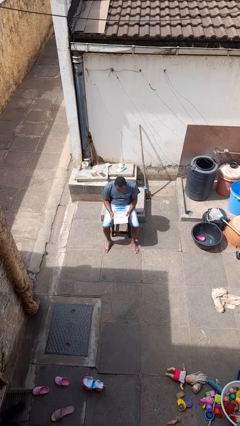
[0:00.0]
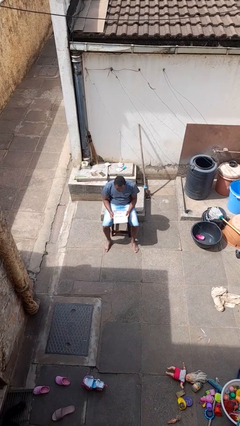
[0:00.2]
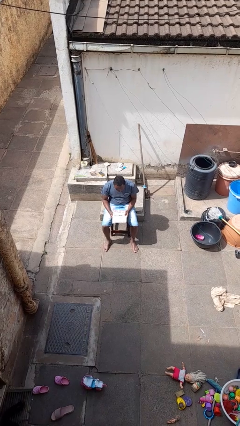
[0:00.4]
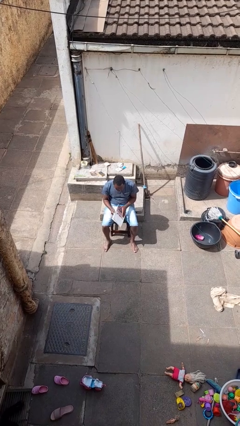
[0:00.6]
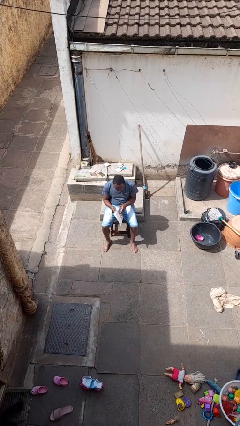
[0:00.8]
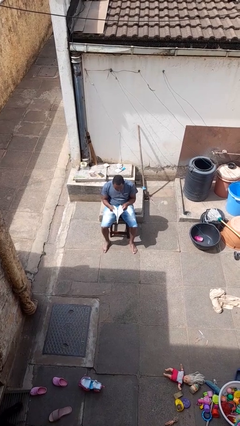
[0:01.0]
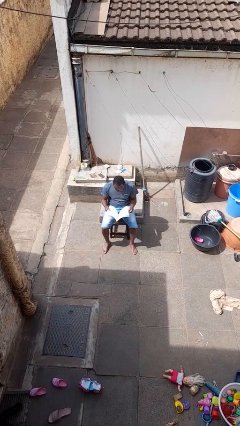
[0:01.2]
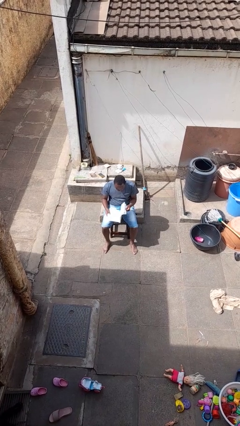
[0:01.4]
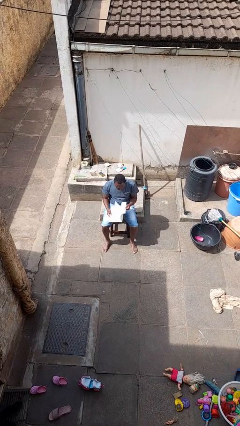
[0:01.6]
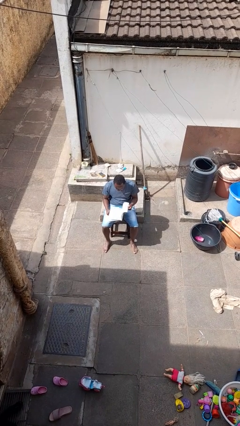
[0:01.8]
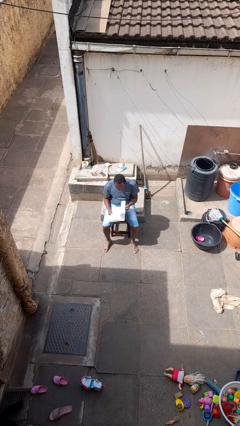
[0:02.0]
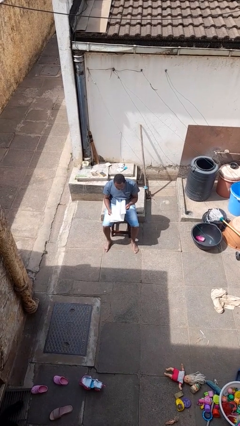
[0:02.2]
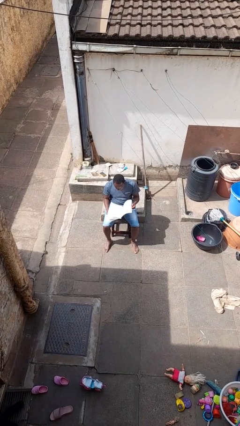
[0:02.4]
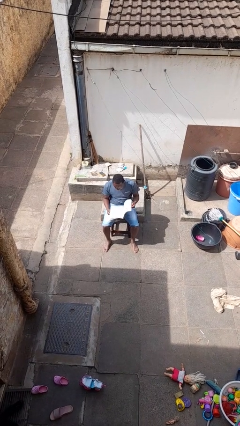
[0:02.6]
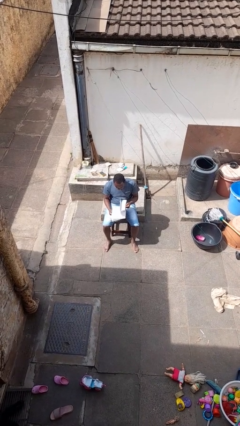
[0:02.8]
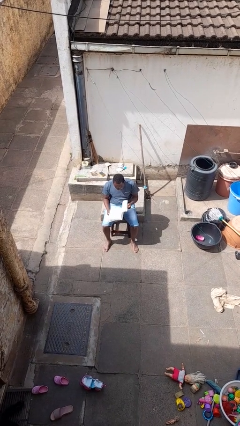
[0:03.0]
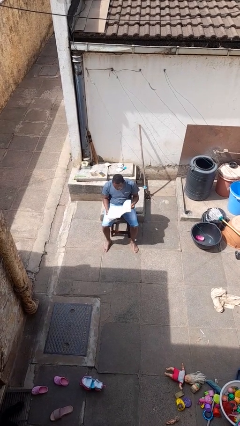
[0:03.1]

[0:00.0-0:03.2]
person reads magazine

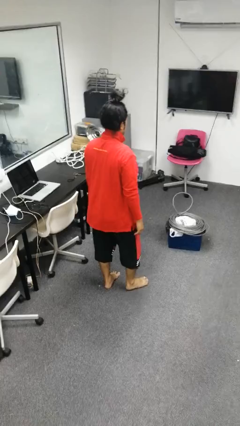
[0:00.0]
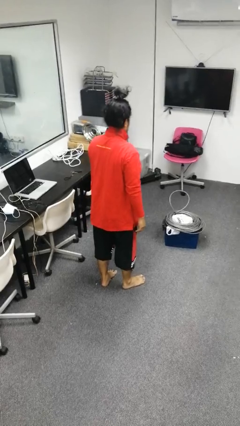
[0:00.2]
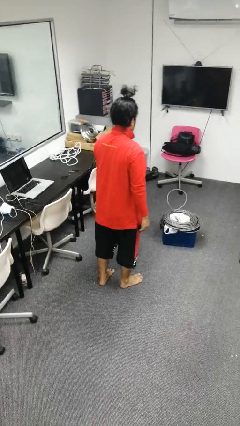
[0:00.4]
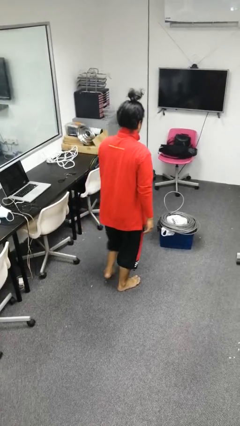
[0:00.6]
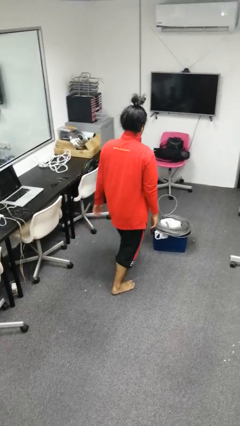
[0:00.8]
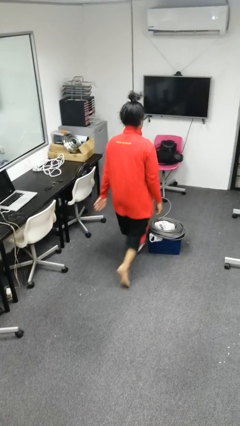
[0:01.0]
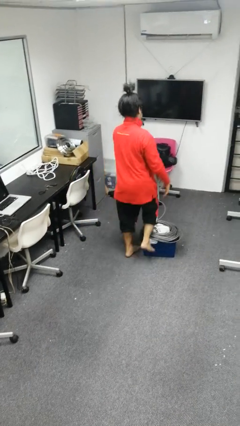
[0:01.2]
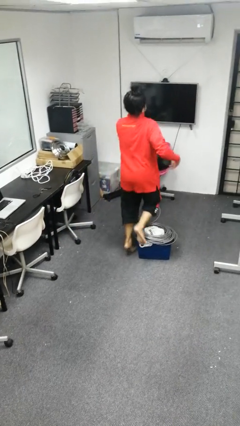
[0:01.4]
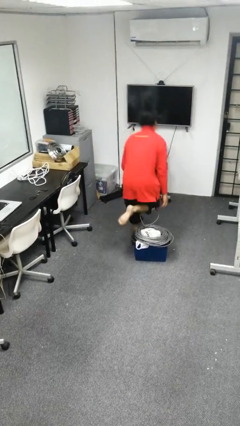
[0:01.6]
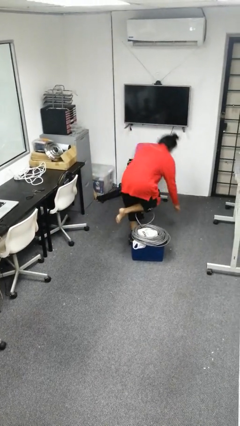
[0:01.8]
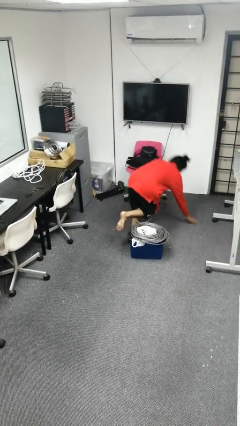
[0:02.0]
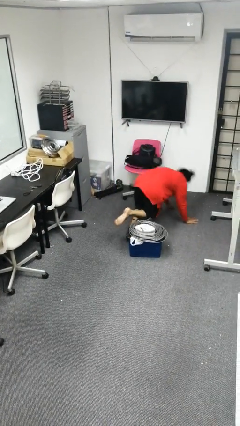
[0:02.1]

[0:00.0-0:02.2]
person trips on object on floor

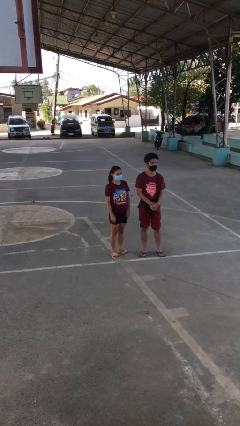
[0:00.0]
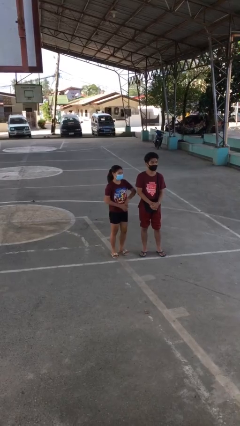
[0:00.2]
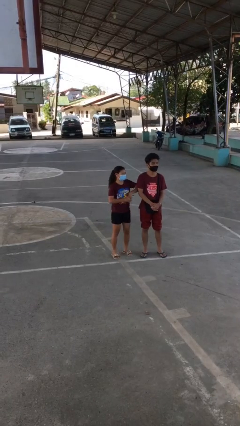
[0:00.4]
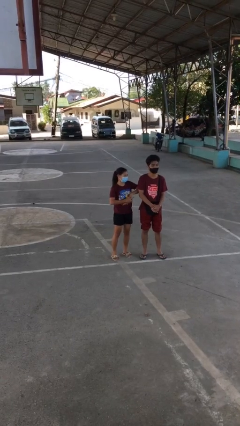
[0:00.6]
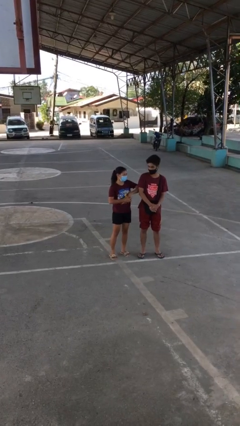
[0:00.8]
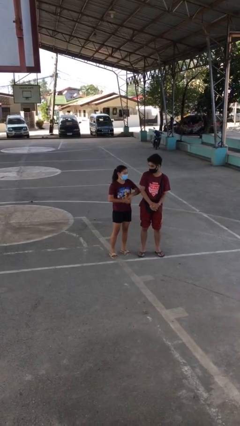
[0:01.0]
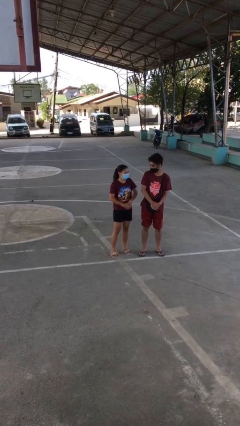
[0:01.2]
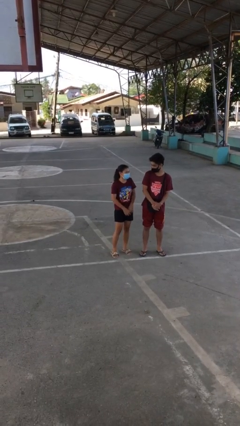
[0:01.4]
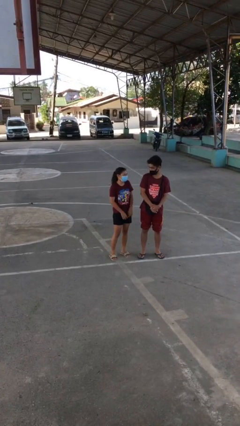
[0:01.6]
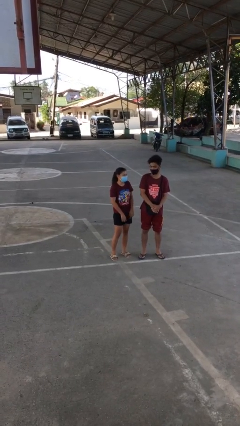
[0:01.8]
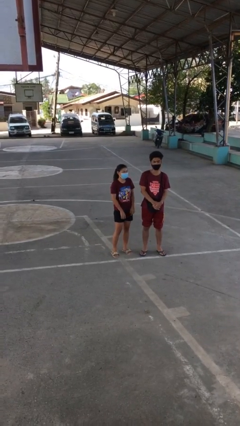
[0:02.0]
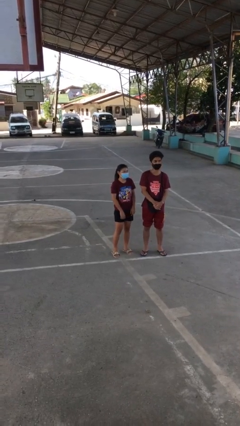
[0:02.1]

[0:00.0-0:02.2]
person nudges person with elbow

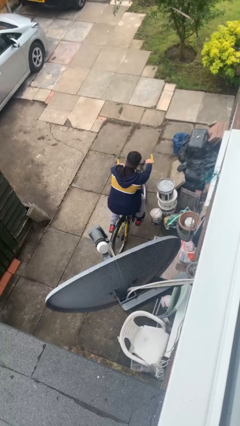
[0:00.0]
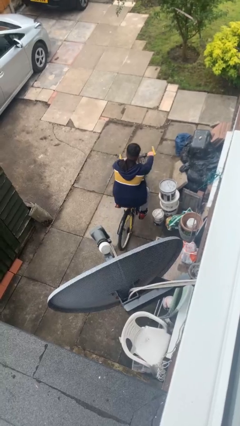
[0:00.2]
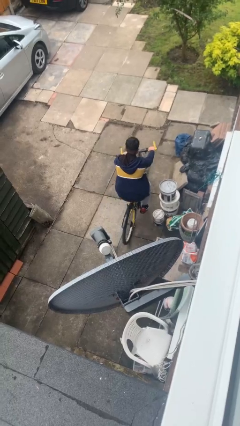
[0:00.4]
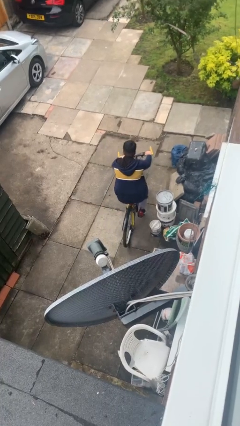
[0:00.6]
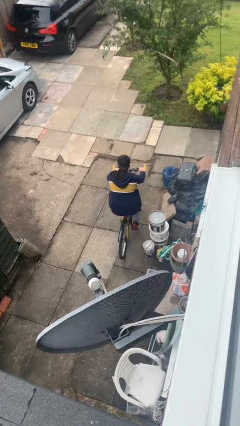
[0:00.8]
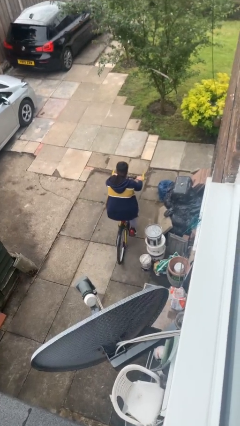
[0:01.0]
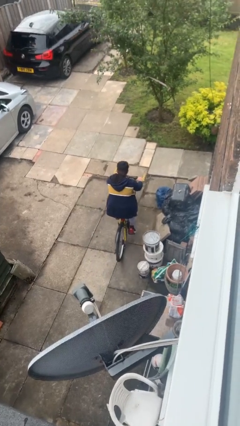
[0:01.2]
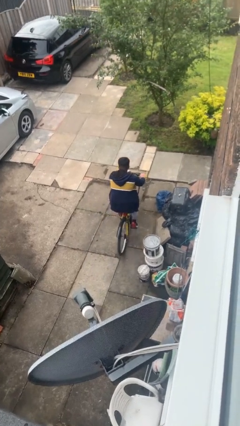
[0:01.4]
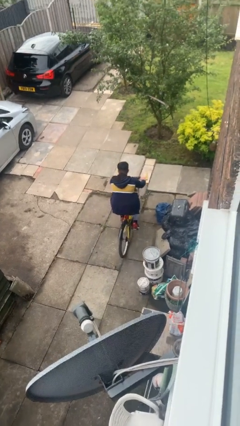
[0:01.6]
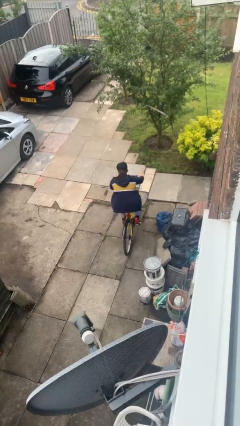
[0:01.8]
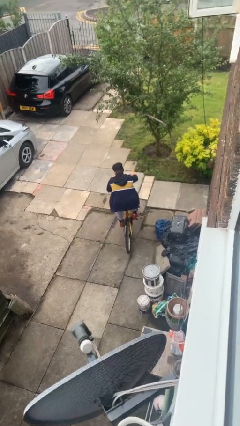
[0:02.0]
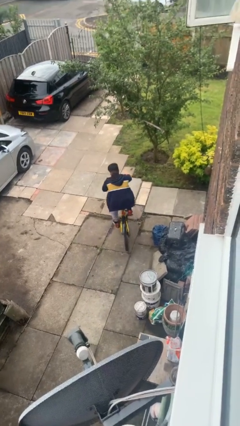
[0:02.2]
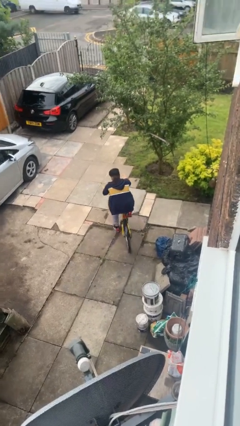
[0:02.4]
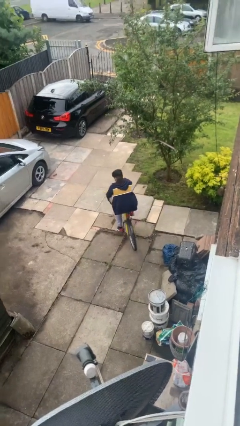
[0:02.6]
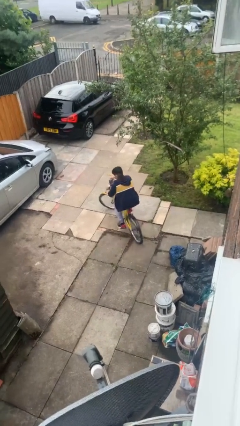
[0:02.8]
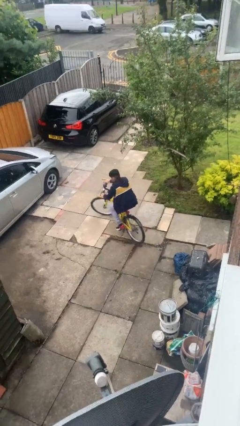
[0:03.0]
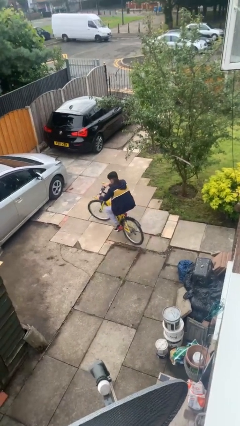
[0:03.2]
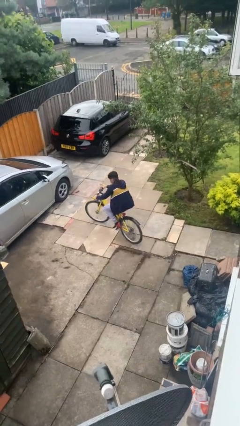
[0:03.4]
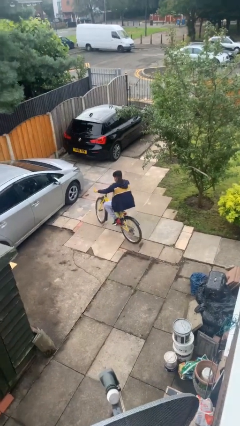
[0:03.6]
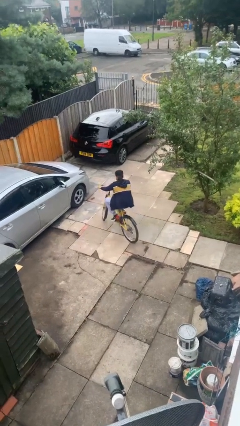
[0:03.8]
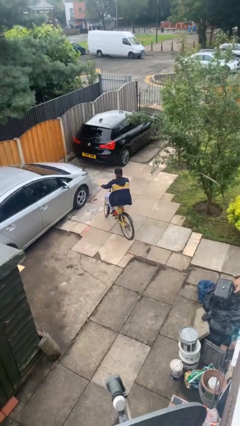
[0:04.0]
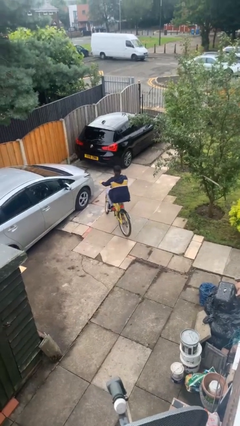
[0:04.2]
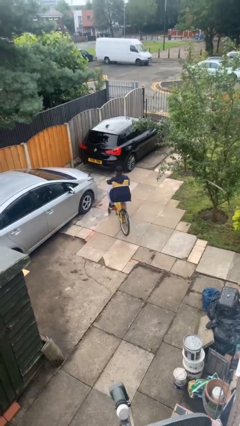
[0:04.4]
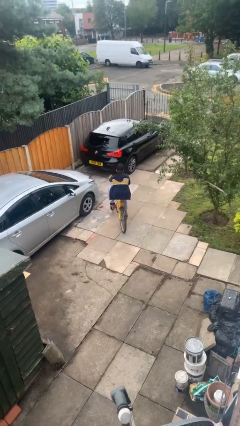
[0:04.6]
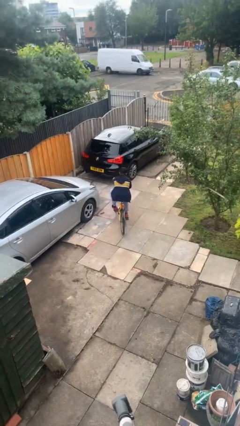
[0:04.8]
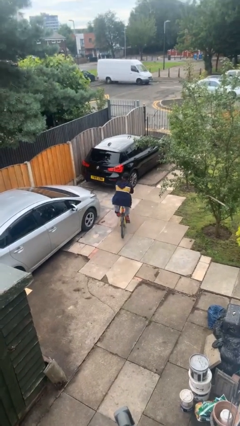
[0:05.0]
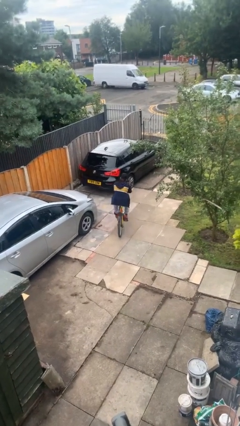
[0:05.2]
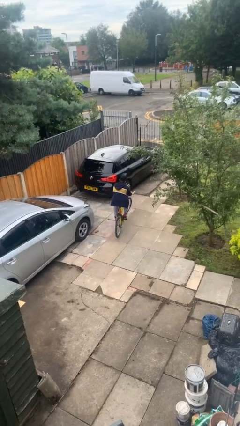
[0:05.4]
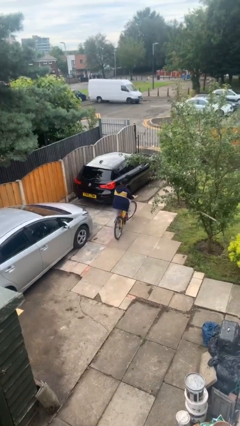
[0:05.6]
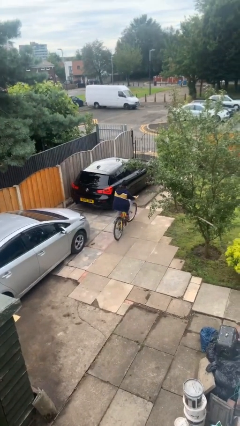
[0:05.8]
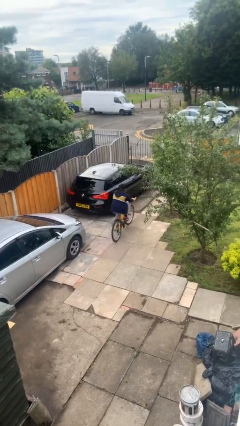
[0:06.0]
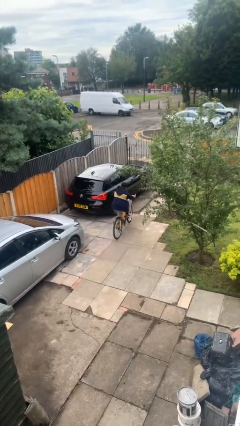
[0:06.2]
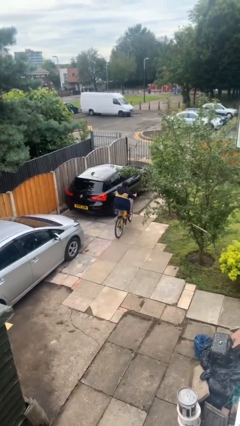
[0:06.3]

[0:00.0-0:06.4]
person rides bicycle

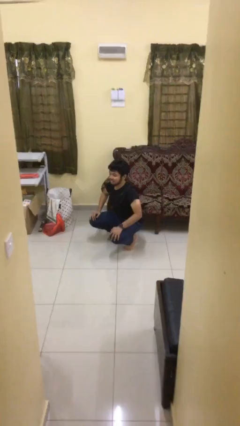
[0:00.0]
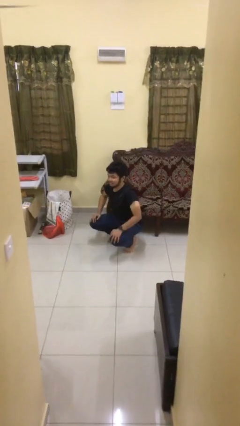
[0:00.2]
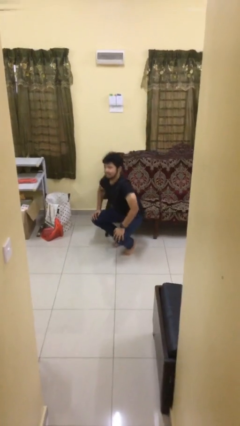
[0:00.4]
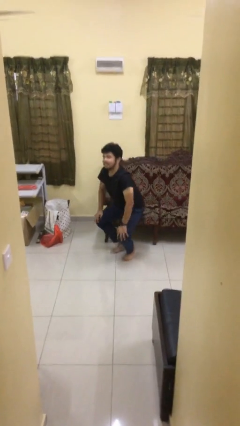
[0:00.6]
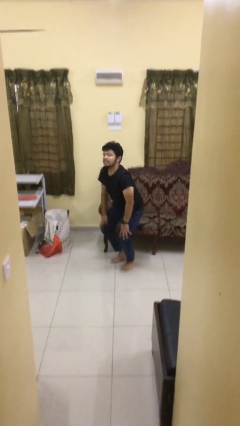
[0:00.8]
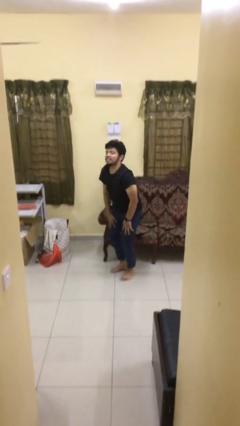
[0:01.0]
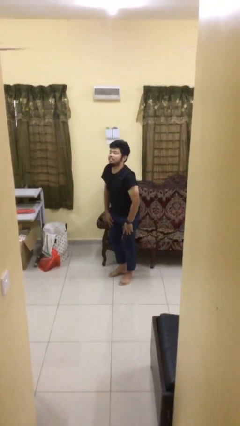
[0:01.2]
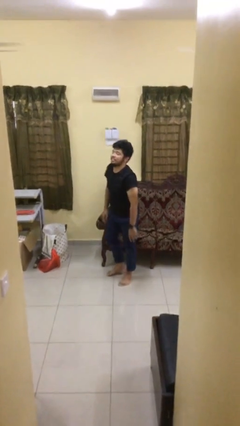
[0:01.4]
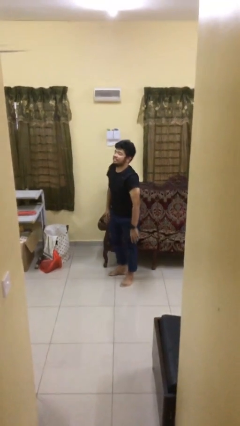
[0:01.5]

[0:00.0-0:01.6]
person stands up

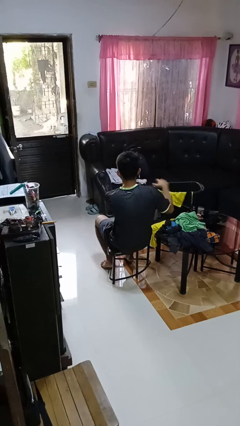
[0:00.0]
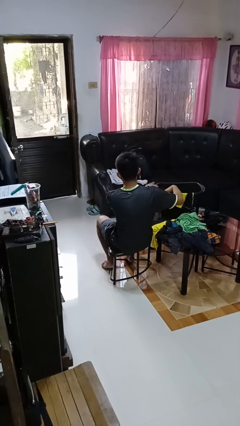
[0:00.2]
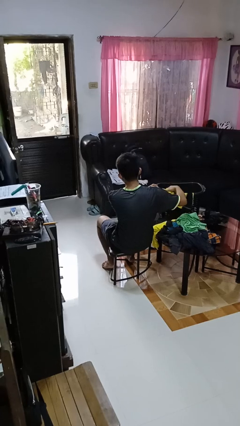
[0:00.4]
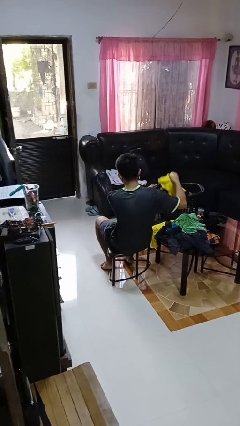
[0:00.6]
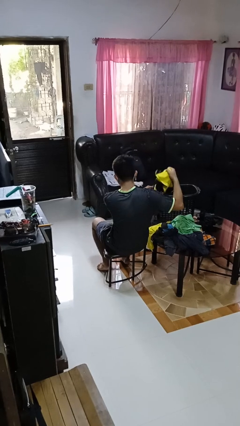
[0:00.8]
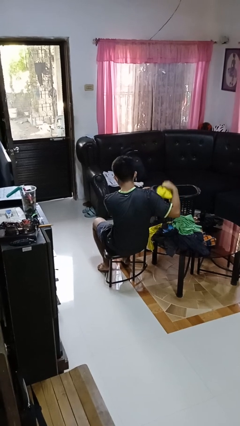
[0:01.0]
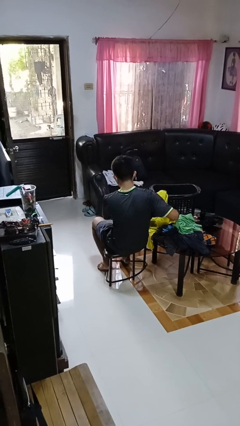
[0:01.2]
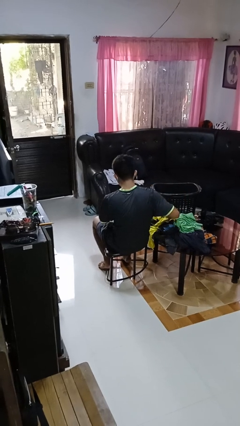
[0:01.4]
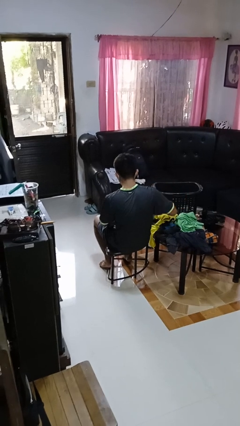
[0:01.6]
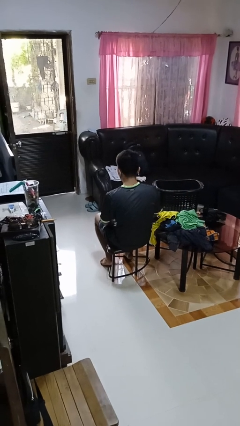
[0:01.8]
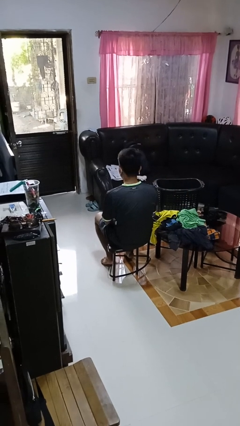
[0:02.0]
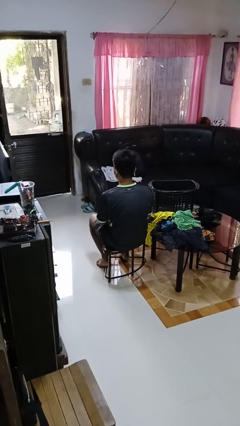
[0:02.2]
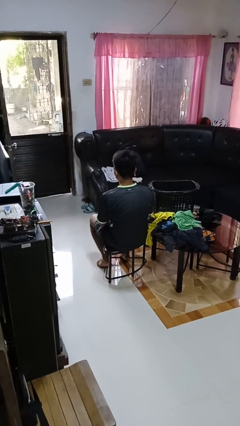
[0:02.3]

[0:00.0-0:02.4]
person takes object from basket
